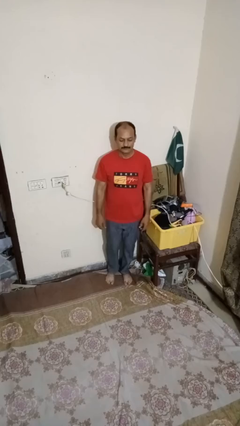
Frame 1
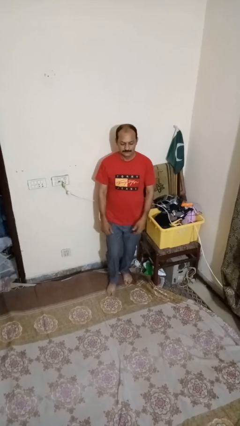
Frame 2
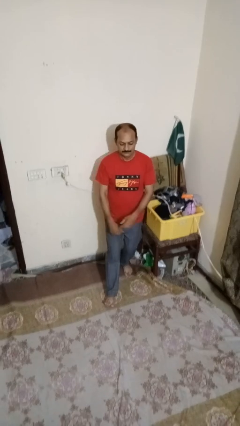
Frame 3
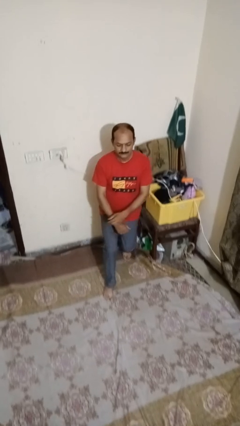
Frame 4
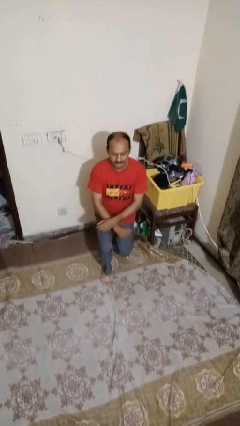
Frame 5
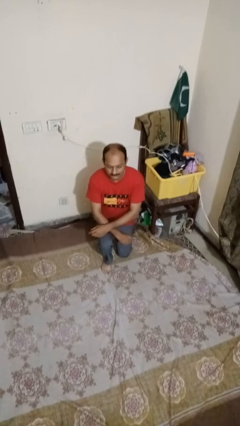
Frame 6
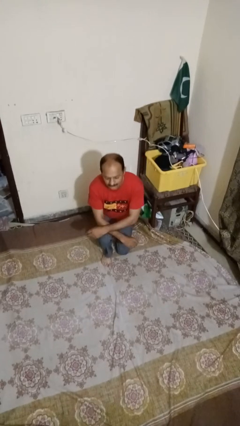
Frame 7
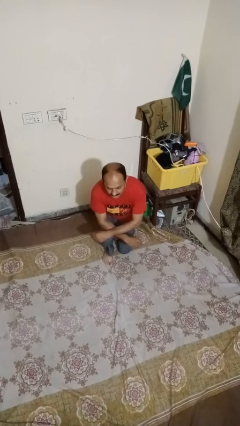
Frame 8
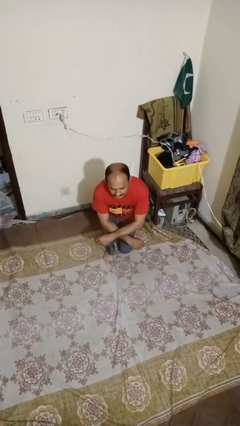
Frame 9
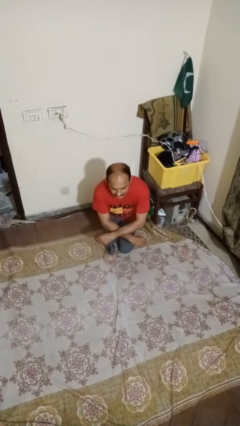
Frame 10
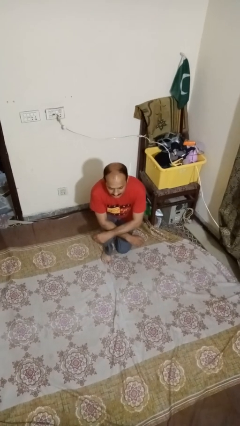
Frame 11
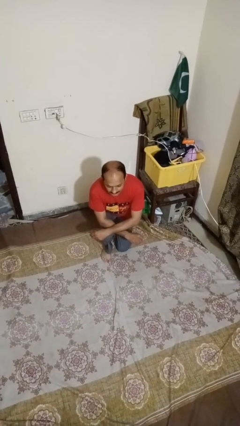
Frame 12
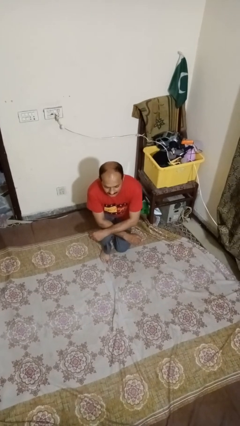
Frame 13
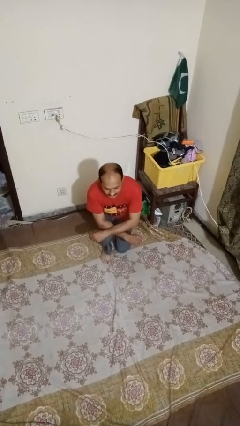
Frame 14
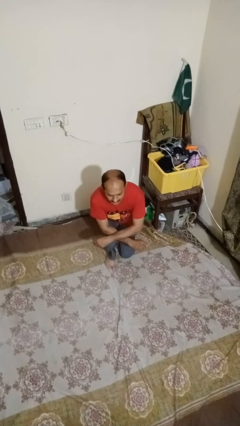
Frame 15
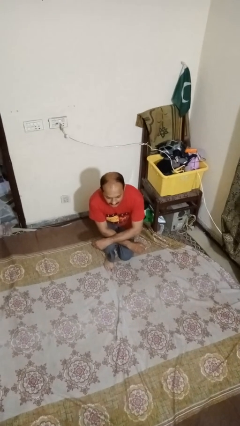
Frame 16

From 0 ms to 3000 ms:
person exercises with lunges

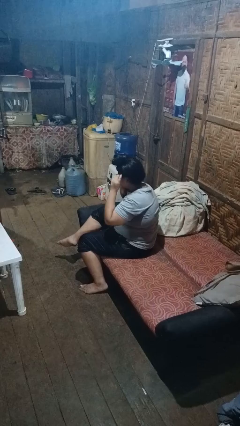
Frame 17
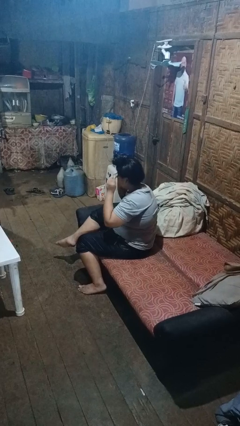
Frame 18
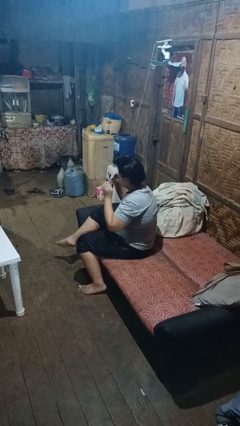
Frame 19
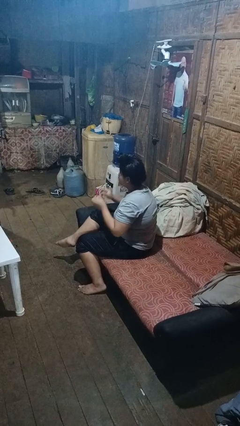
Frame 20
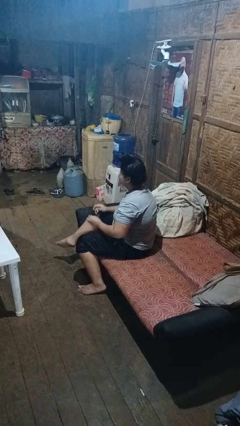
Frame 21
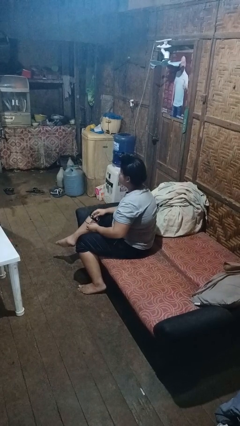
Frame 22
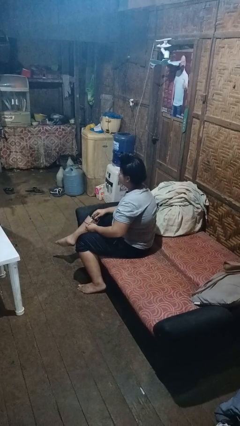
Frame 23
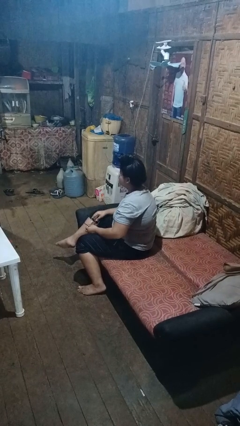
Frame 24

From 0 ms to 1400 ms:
person takes off glasses

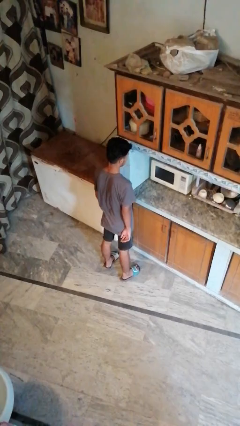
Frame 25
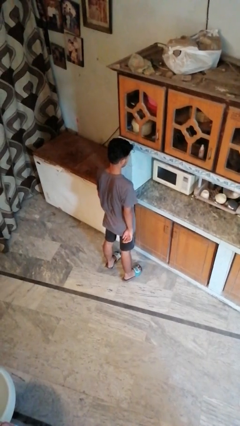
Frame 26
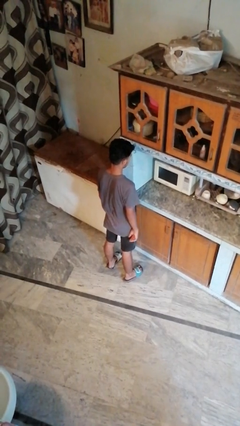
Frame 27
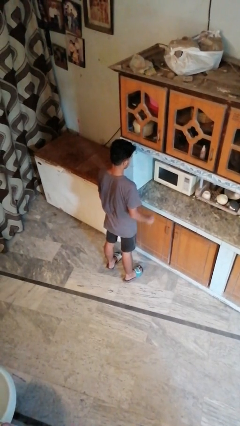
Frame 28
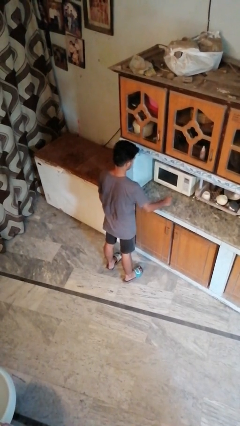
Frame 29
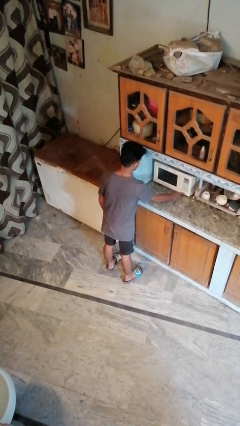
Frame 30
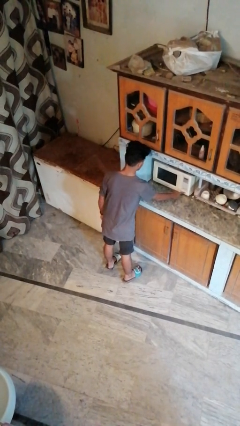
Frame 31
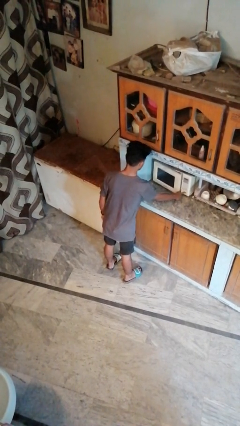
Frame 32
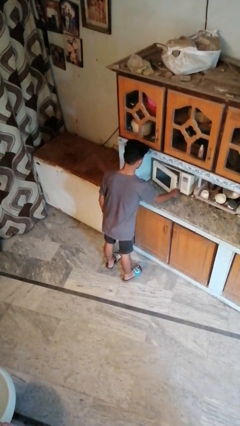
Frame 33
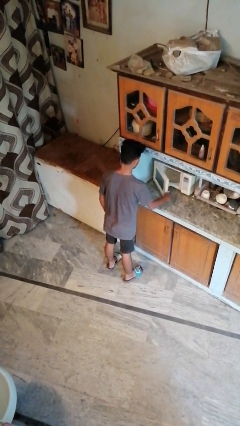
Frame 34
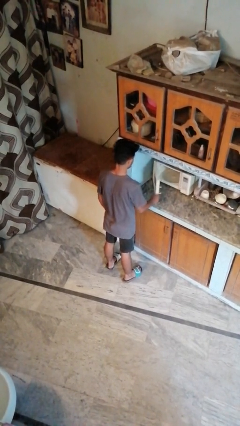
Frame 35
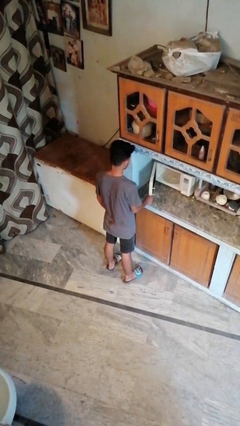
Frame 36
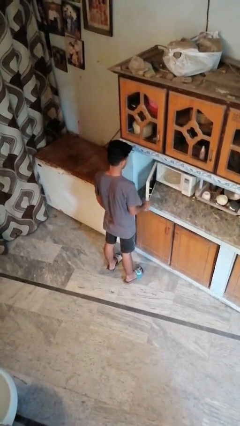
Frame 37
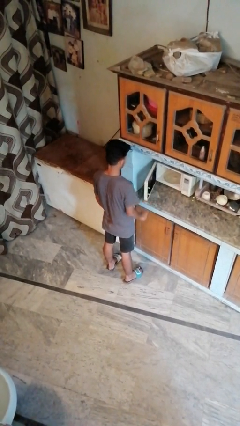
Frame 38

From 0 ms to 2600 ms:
person opens oven door

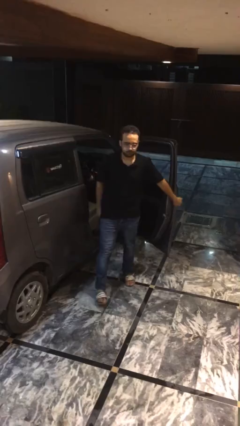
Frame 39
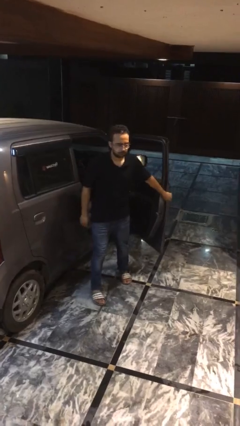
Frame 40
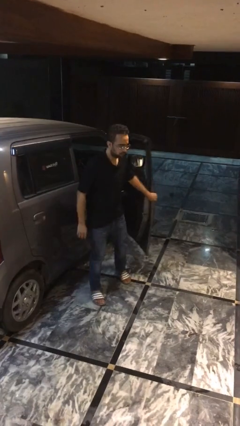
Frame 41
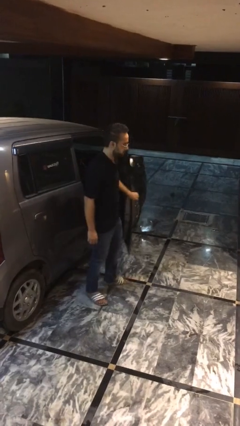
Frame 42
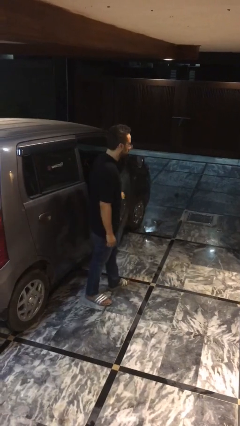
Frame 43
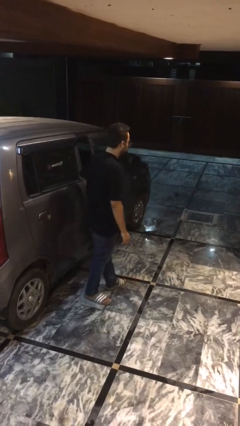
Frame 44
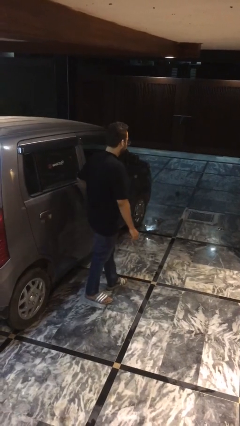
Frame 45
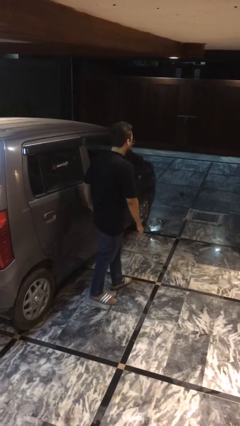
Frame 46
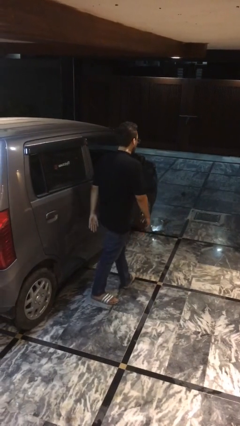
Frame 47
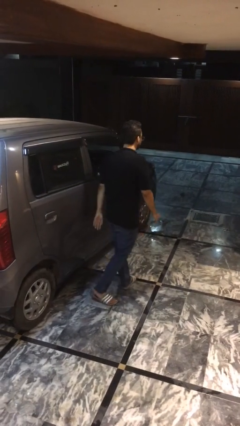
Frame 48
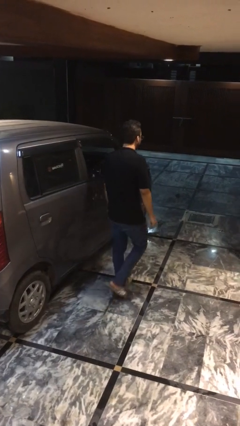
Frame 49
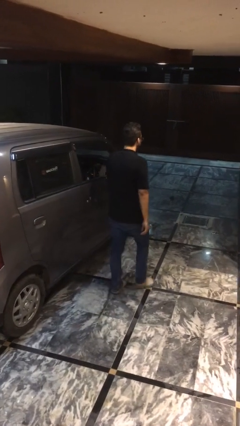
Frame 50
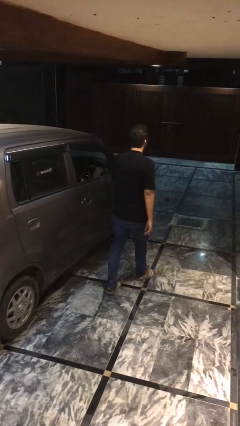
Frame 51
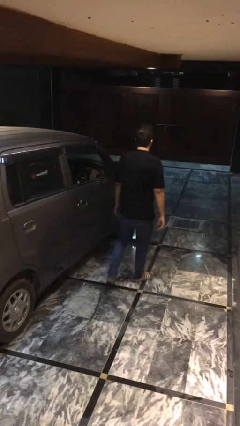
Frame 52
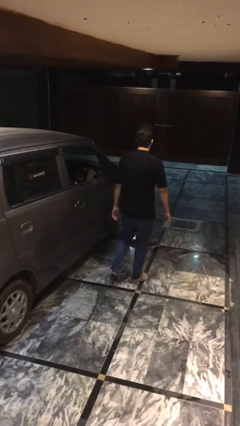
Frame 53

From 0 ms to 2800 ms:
person closes car door

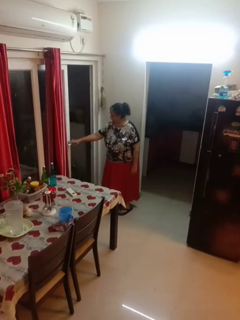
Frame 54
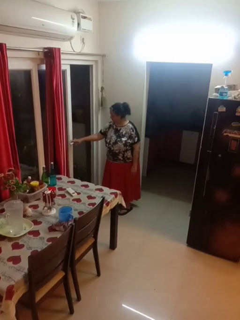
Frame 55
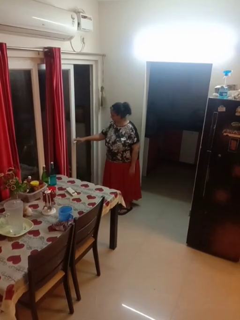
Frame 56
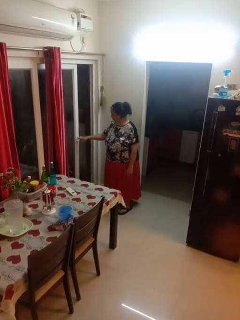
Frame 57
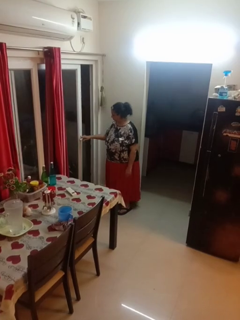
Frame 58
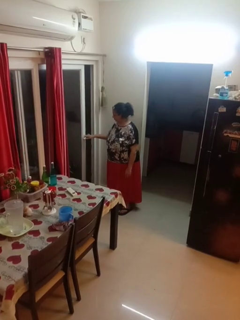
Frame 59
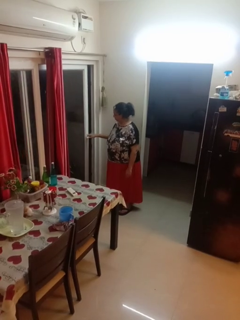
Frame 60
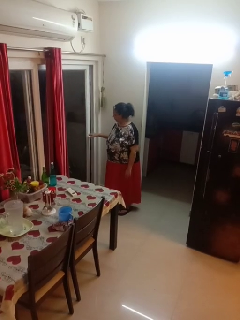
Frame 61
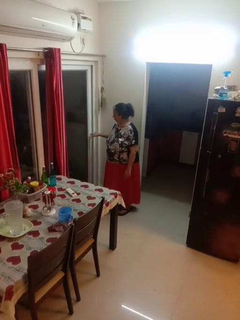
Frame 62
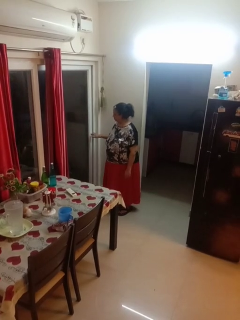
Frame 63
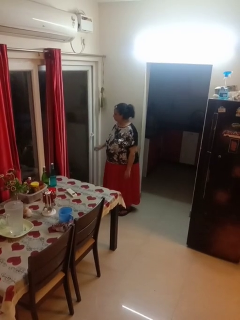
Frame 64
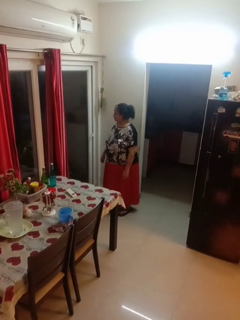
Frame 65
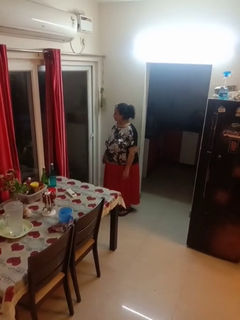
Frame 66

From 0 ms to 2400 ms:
person closes sliding door

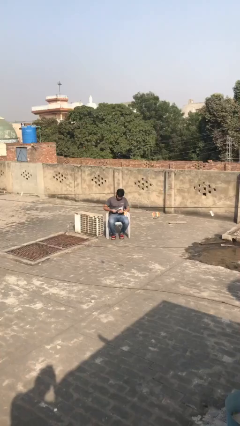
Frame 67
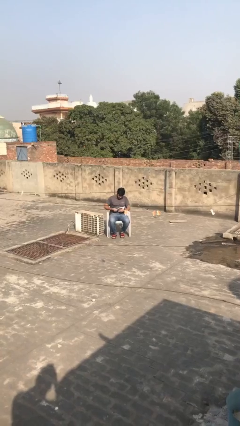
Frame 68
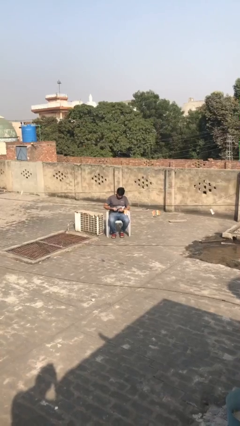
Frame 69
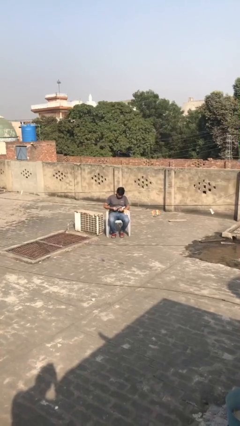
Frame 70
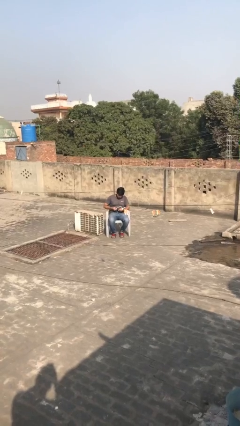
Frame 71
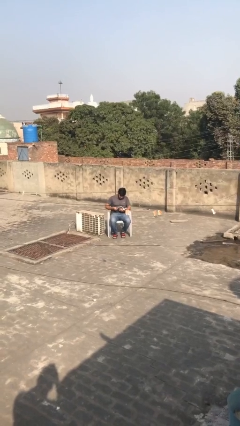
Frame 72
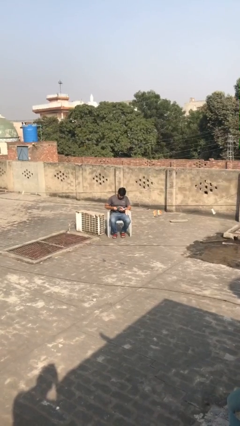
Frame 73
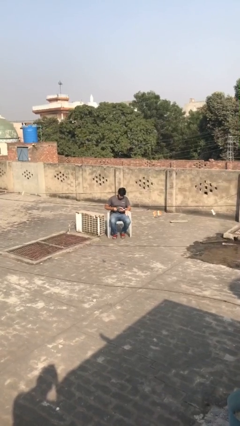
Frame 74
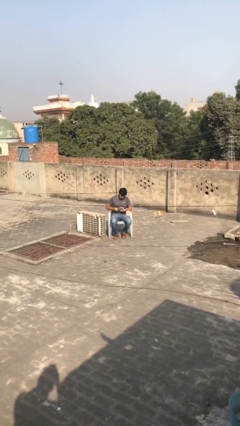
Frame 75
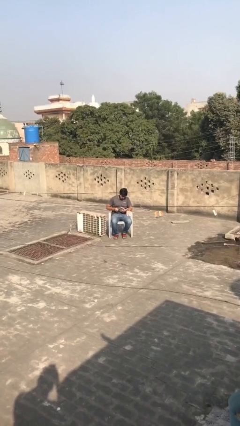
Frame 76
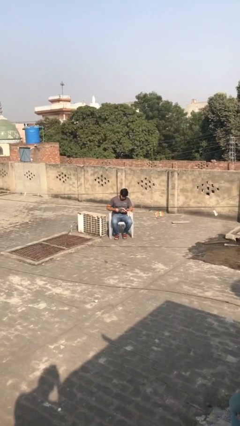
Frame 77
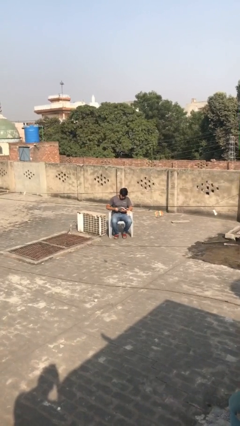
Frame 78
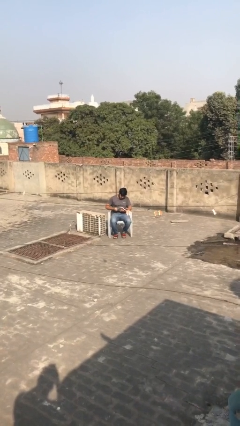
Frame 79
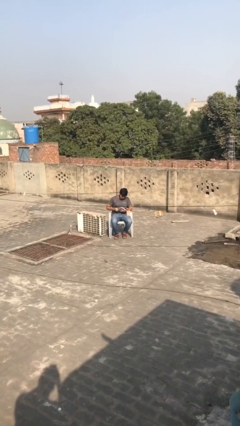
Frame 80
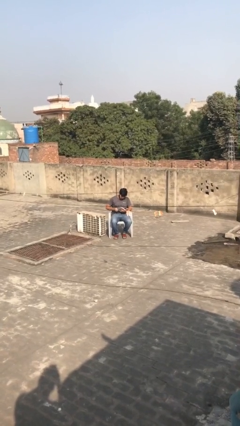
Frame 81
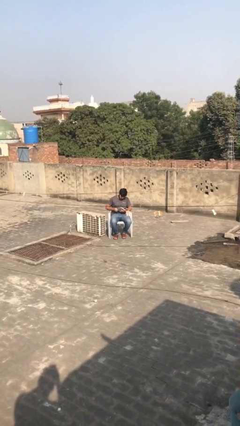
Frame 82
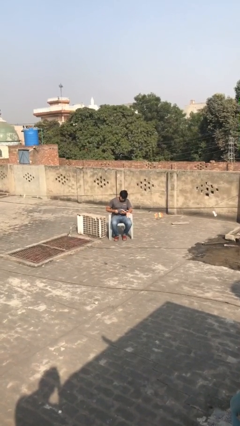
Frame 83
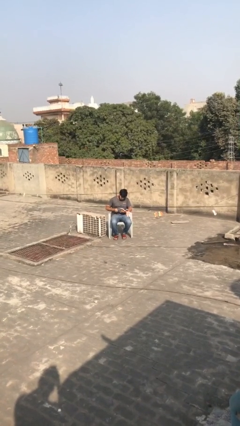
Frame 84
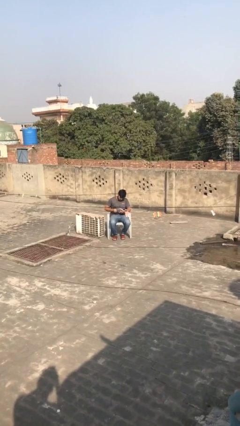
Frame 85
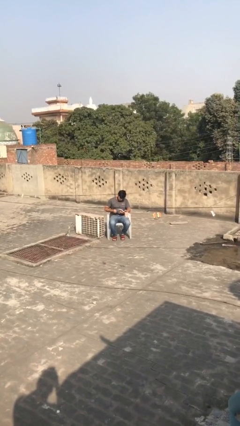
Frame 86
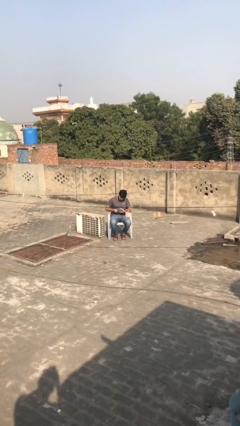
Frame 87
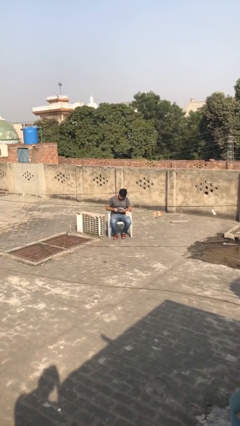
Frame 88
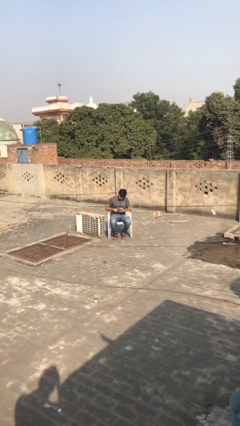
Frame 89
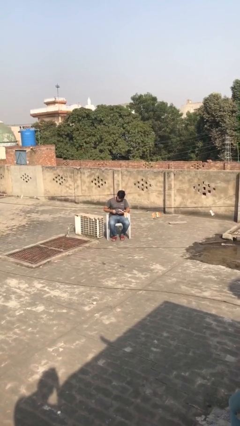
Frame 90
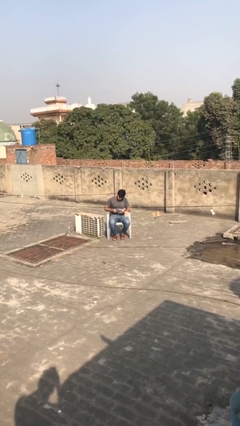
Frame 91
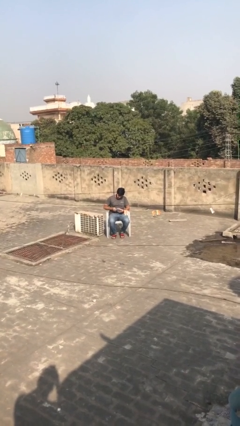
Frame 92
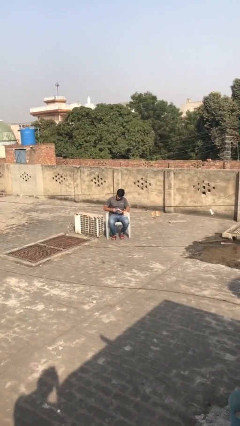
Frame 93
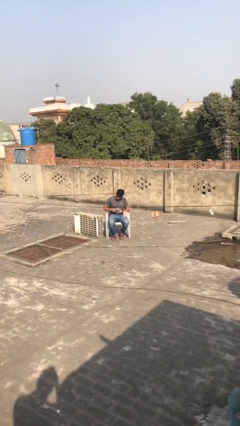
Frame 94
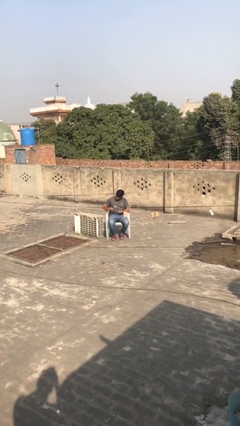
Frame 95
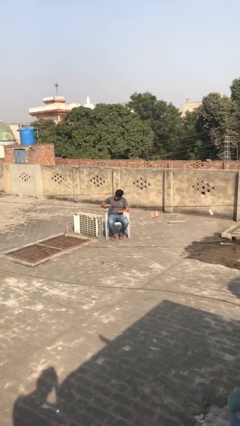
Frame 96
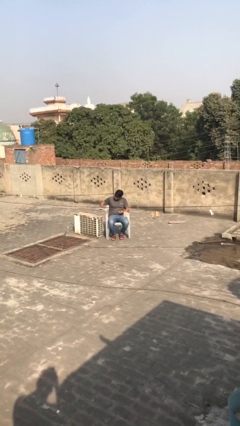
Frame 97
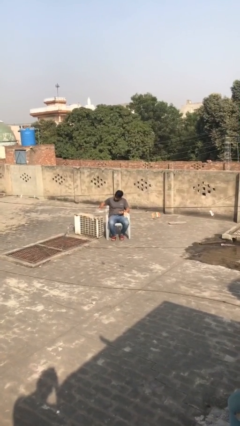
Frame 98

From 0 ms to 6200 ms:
person reads document
